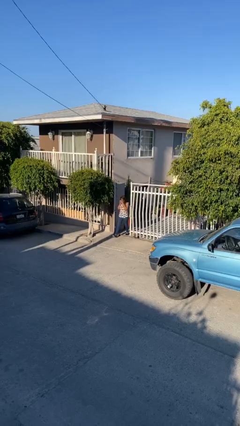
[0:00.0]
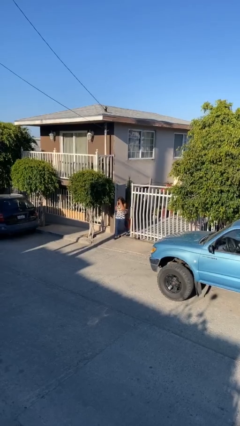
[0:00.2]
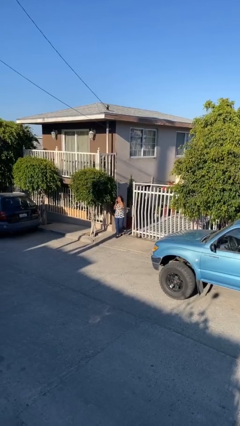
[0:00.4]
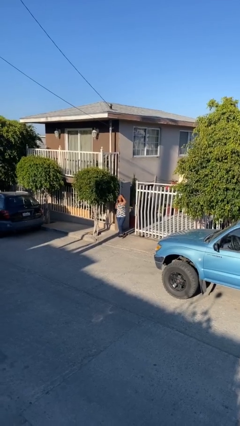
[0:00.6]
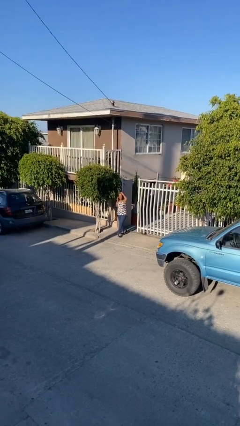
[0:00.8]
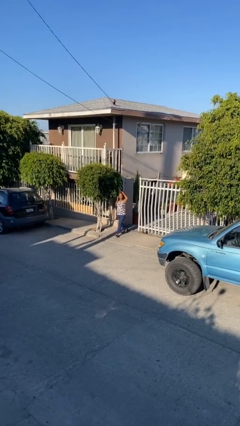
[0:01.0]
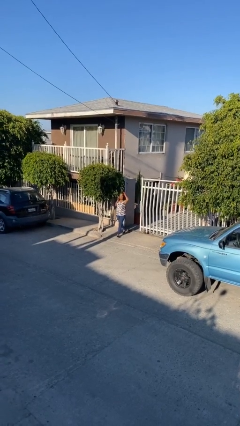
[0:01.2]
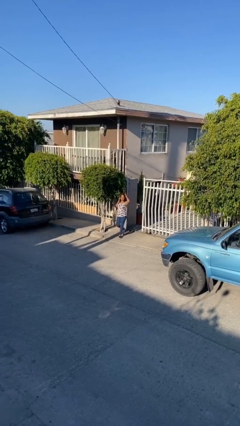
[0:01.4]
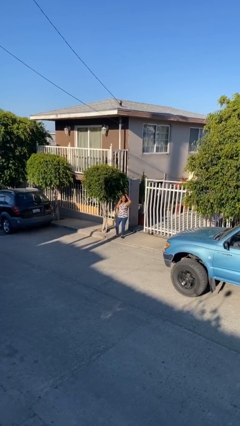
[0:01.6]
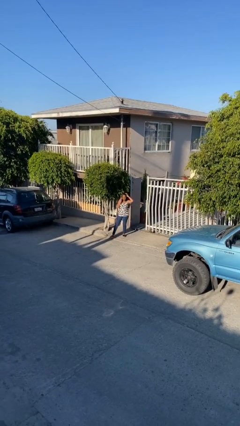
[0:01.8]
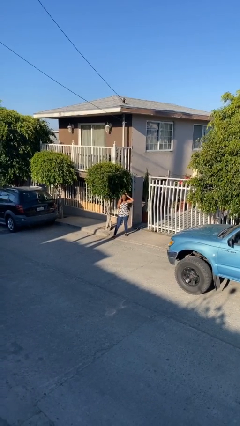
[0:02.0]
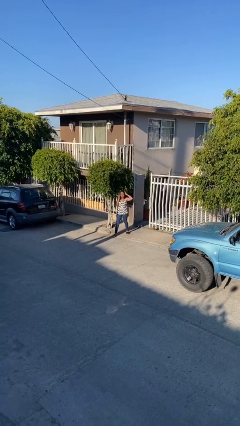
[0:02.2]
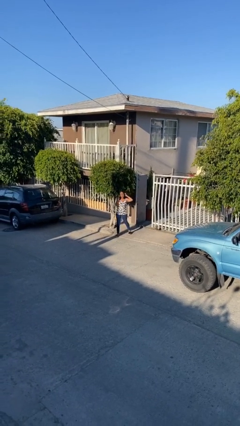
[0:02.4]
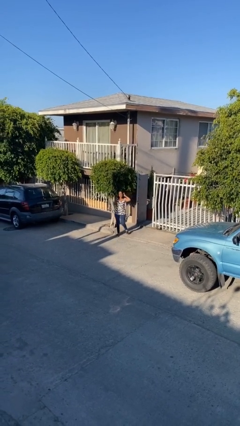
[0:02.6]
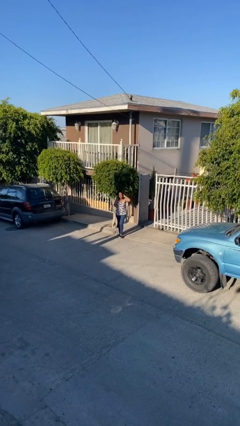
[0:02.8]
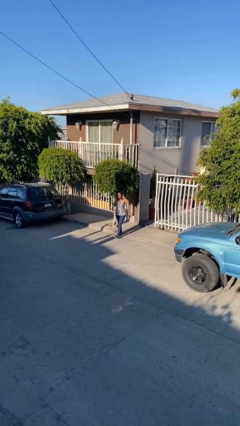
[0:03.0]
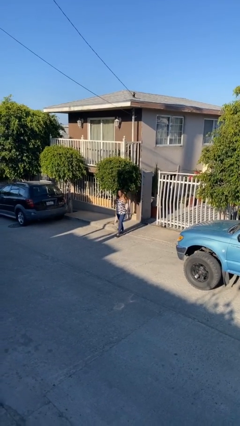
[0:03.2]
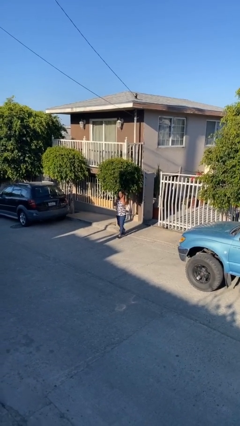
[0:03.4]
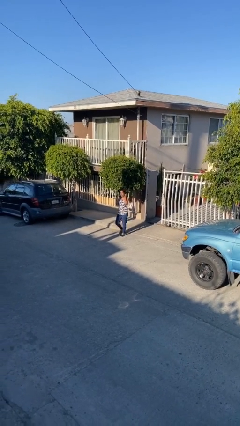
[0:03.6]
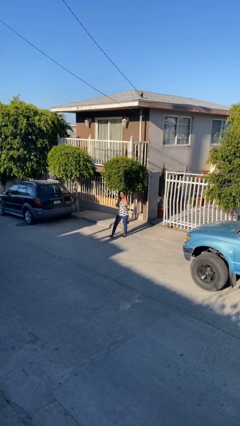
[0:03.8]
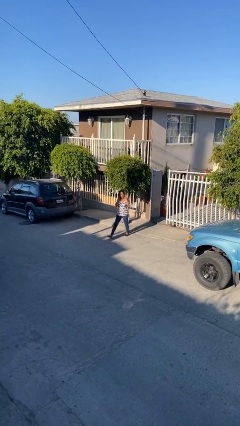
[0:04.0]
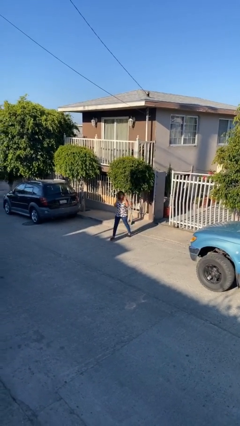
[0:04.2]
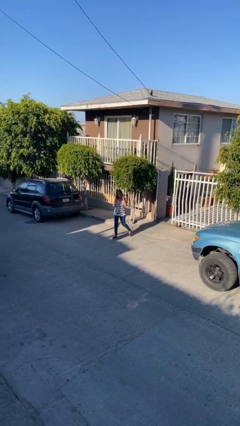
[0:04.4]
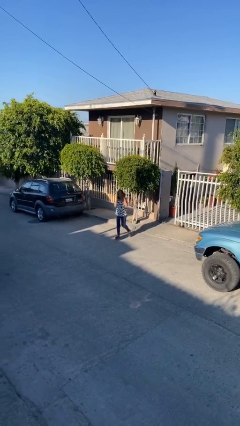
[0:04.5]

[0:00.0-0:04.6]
person enters scene through structure

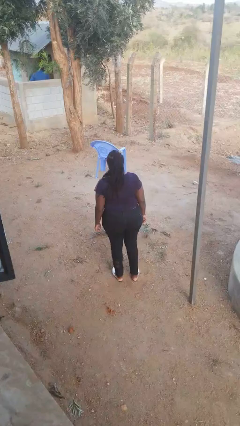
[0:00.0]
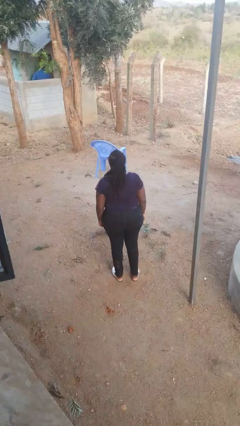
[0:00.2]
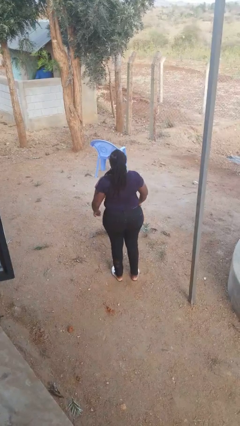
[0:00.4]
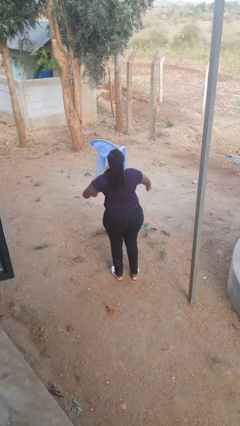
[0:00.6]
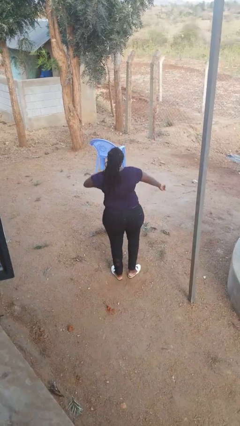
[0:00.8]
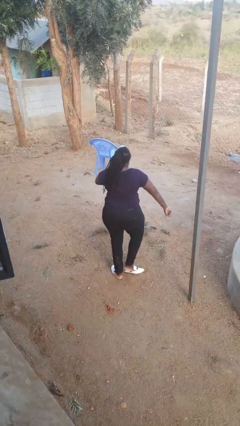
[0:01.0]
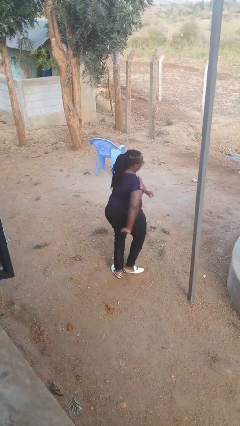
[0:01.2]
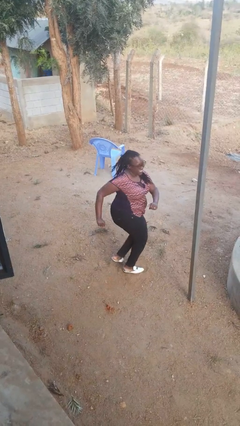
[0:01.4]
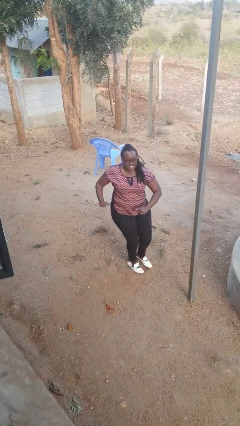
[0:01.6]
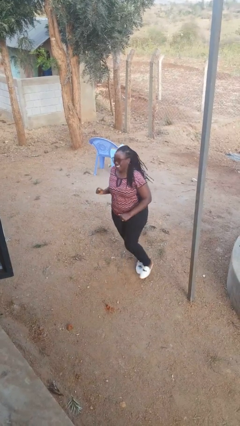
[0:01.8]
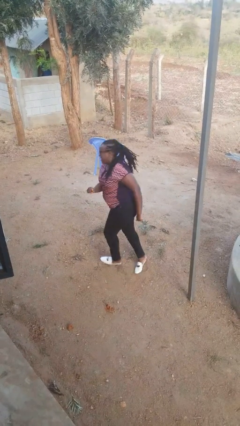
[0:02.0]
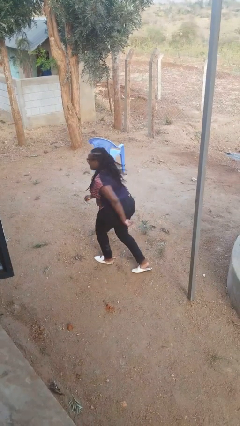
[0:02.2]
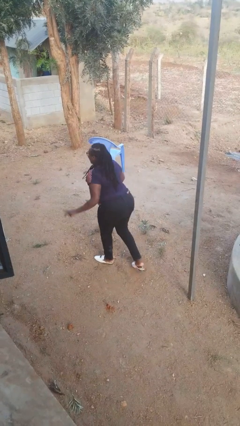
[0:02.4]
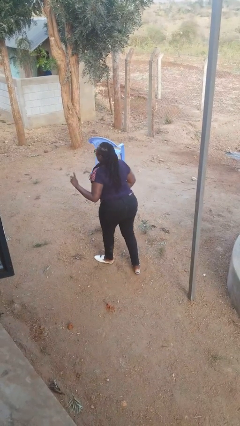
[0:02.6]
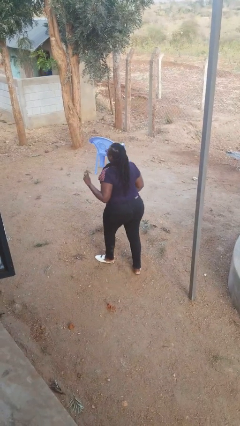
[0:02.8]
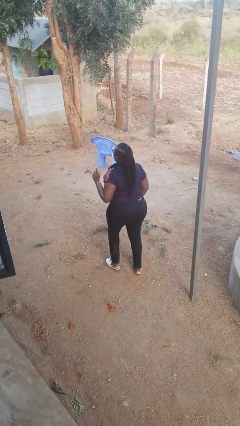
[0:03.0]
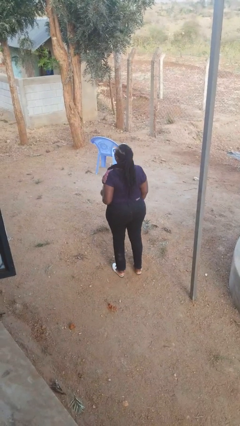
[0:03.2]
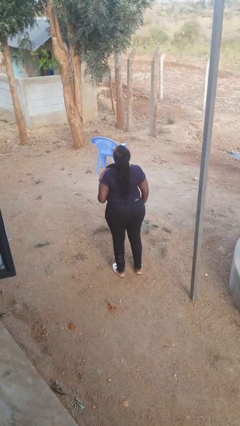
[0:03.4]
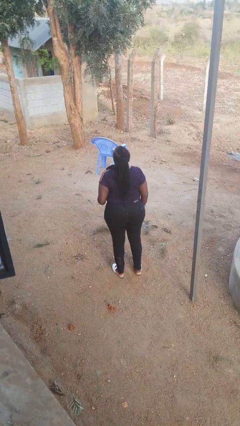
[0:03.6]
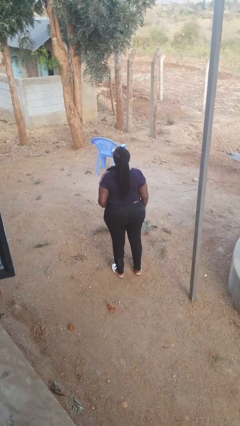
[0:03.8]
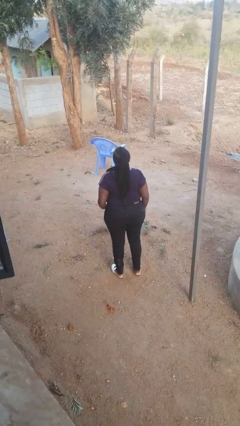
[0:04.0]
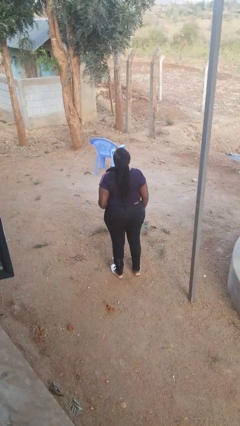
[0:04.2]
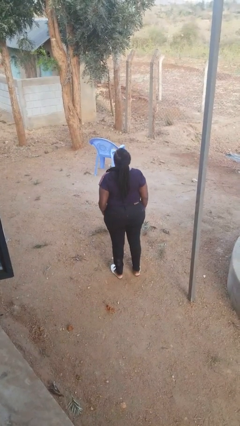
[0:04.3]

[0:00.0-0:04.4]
person twirls

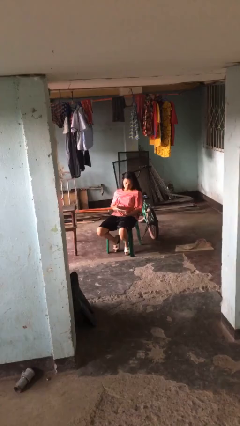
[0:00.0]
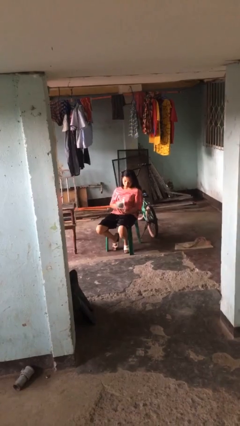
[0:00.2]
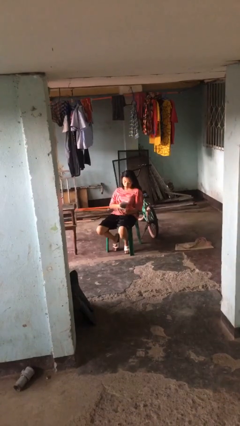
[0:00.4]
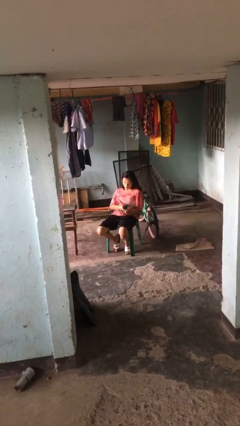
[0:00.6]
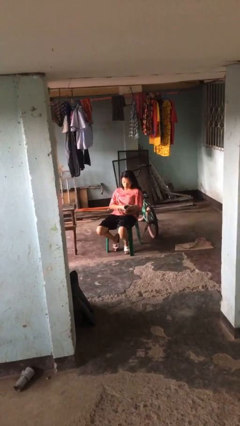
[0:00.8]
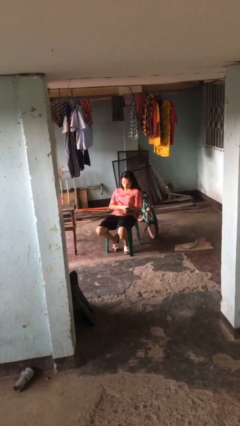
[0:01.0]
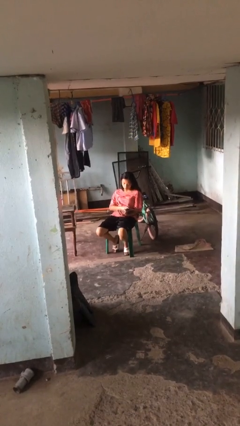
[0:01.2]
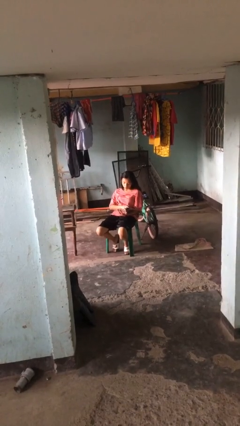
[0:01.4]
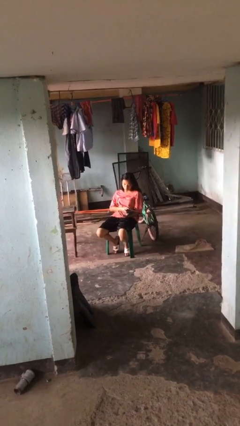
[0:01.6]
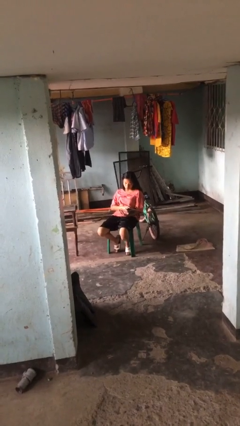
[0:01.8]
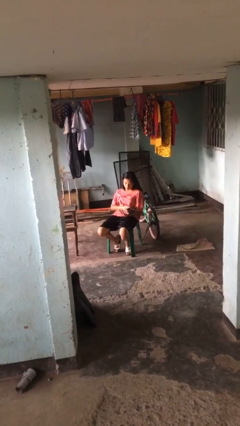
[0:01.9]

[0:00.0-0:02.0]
person reads document

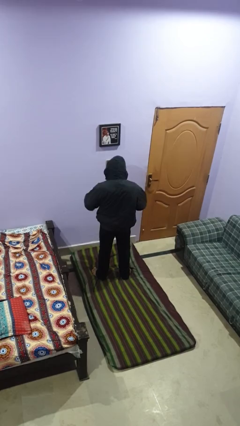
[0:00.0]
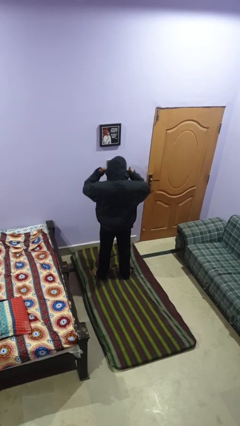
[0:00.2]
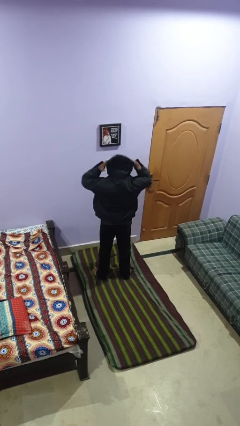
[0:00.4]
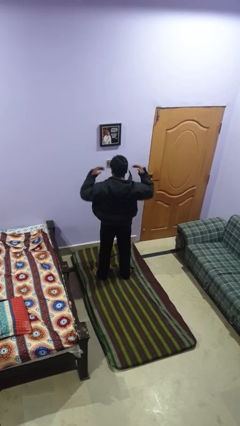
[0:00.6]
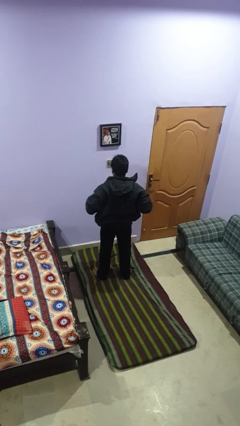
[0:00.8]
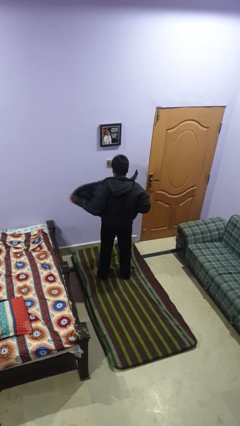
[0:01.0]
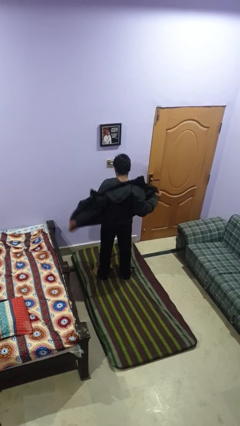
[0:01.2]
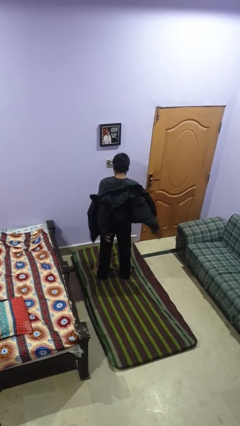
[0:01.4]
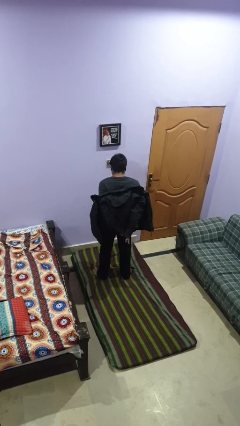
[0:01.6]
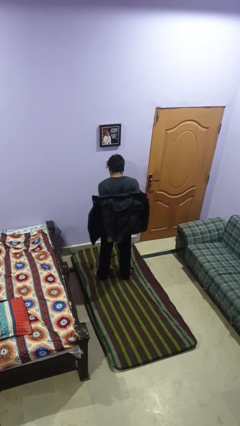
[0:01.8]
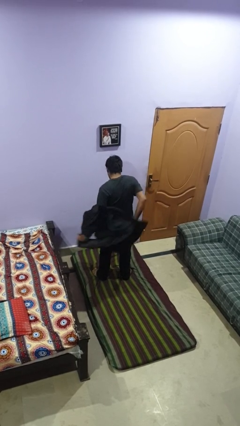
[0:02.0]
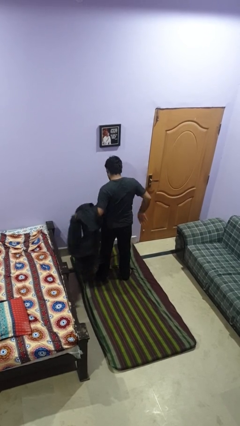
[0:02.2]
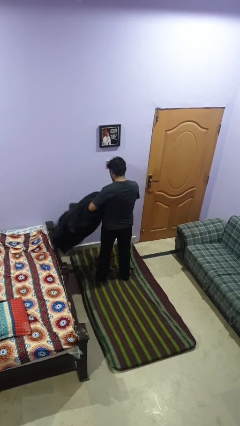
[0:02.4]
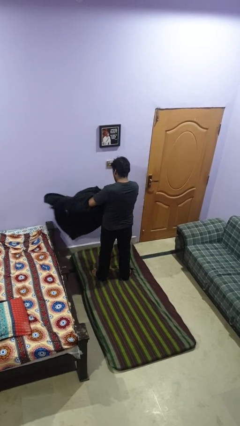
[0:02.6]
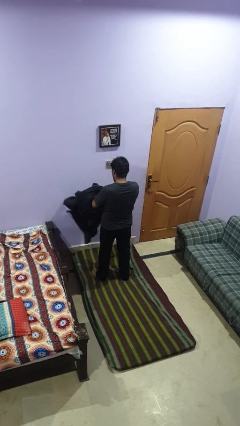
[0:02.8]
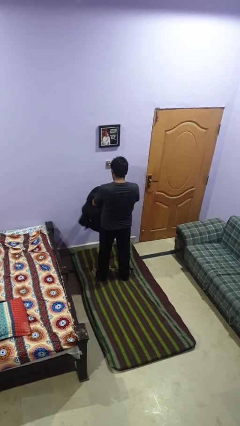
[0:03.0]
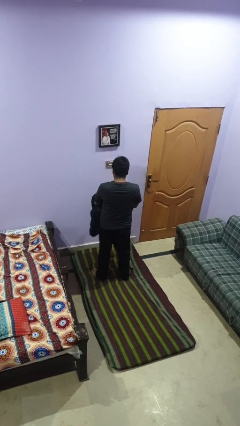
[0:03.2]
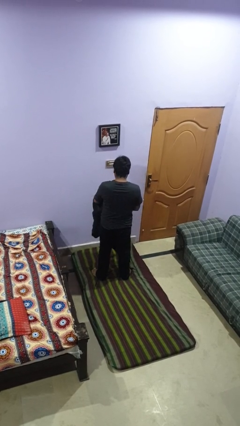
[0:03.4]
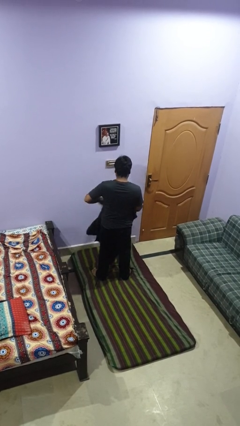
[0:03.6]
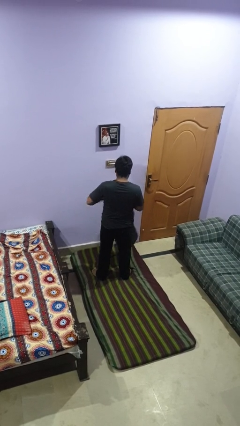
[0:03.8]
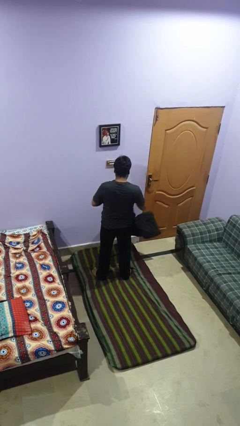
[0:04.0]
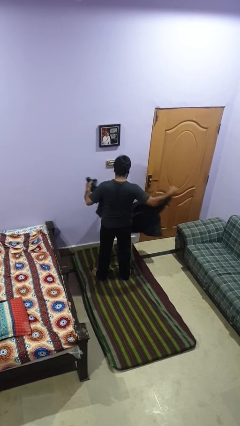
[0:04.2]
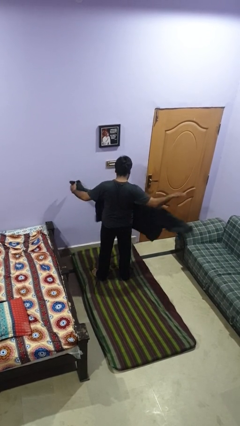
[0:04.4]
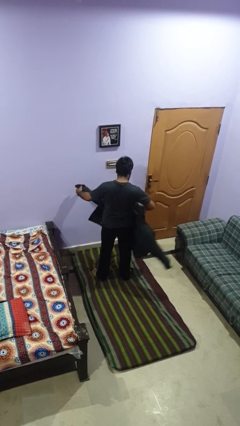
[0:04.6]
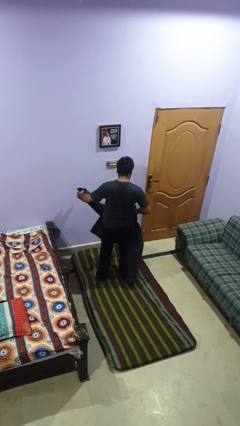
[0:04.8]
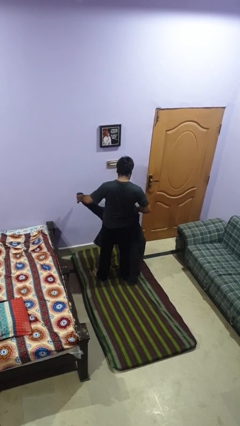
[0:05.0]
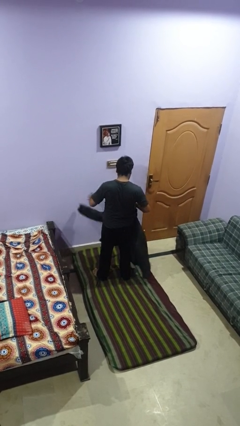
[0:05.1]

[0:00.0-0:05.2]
person takes off hoodie

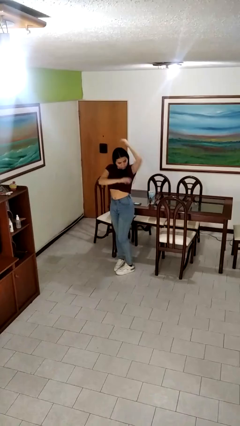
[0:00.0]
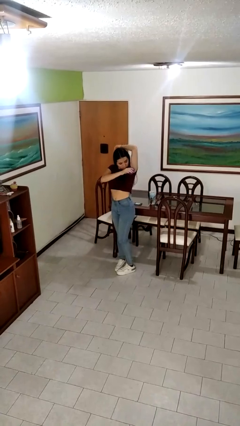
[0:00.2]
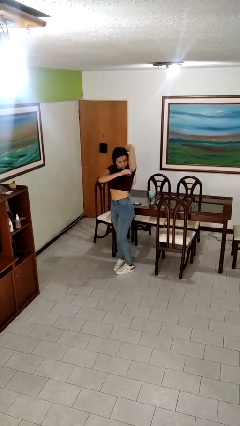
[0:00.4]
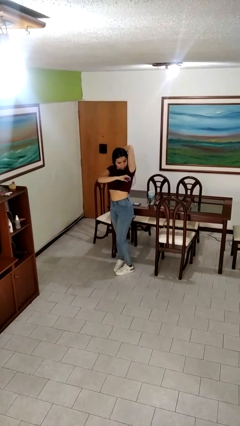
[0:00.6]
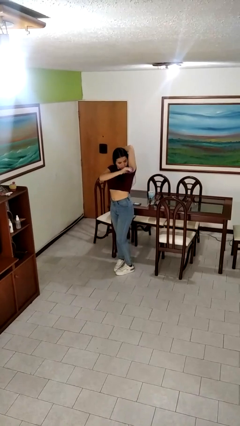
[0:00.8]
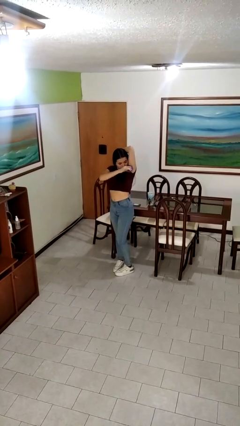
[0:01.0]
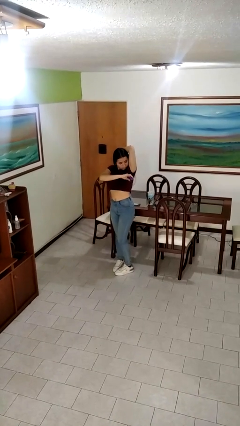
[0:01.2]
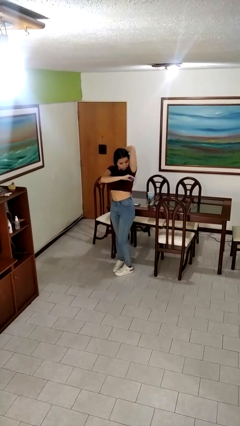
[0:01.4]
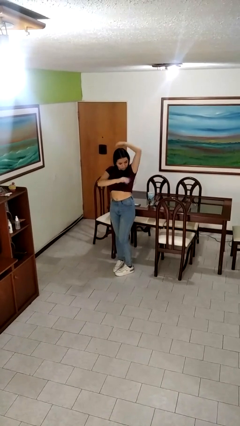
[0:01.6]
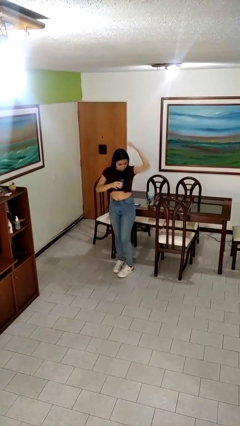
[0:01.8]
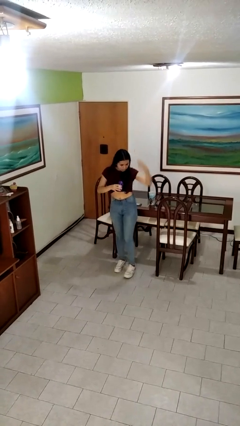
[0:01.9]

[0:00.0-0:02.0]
person applies deodorant
